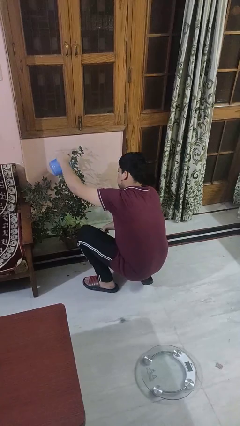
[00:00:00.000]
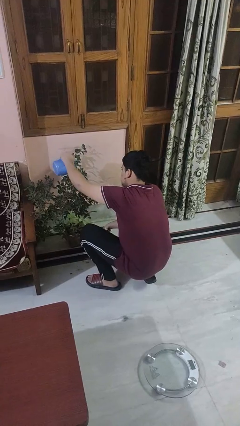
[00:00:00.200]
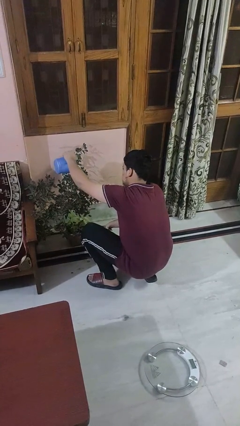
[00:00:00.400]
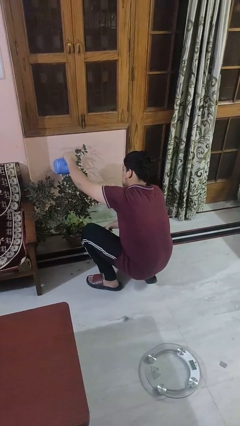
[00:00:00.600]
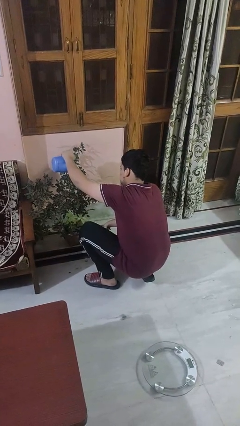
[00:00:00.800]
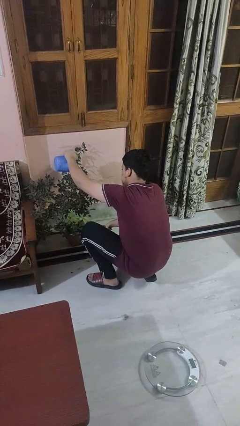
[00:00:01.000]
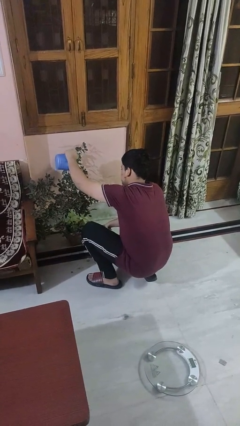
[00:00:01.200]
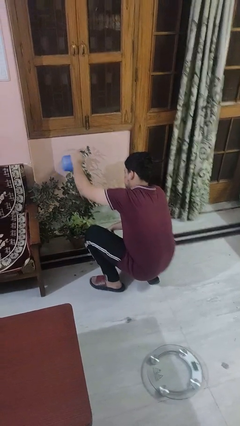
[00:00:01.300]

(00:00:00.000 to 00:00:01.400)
person waters houseplant

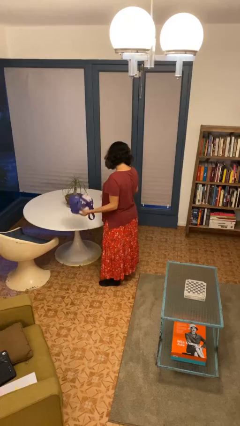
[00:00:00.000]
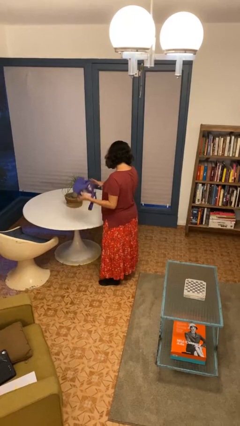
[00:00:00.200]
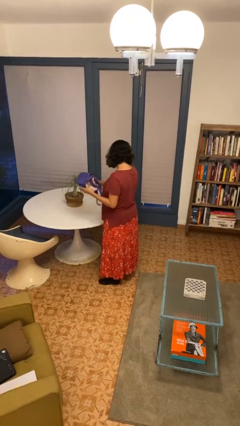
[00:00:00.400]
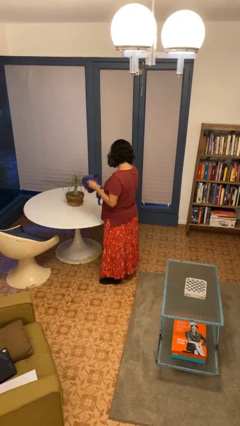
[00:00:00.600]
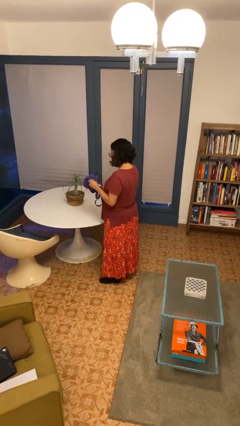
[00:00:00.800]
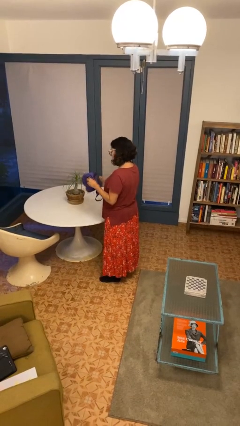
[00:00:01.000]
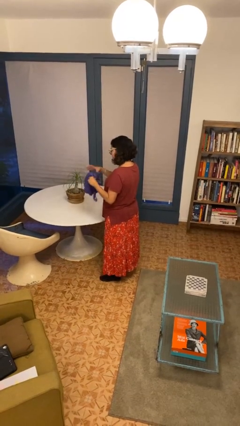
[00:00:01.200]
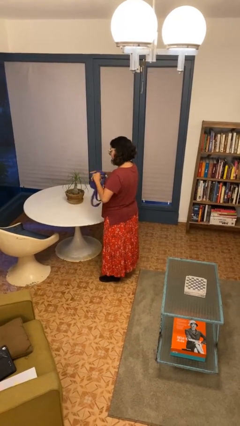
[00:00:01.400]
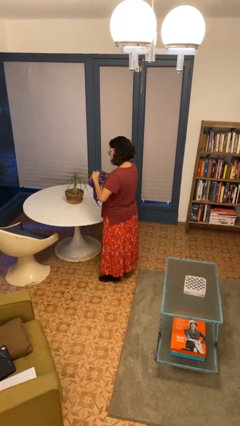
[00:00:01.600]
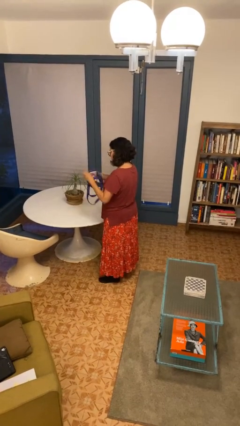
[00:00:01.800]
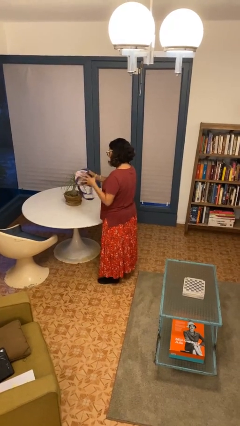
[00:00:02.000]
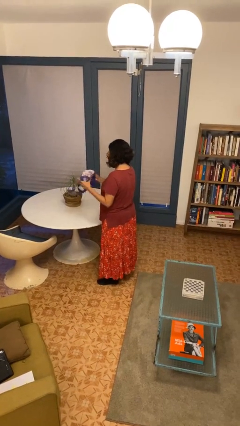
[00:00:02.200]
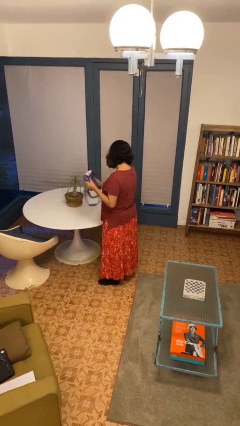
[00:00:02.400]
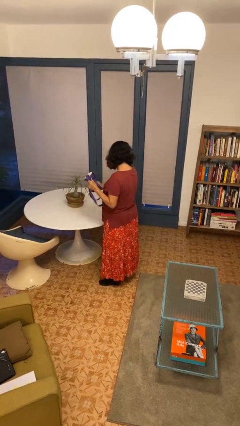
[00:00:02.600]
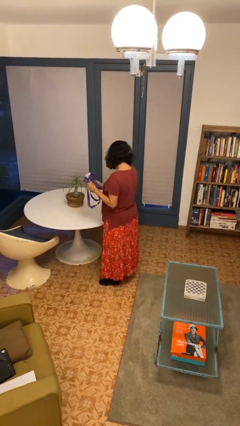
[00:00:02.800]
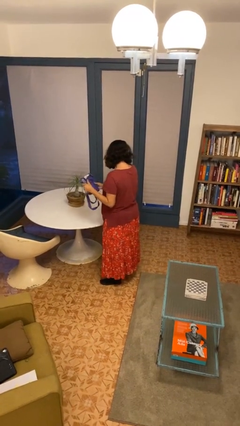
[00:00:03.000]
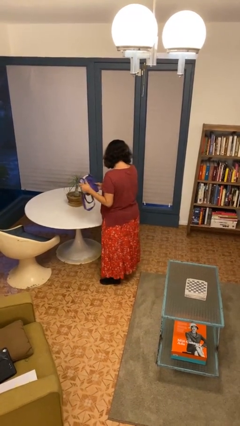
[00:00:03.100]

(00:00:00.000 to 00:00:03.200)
person squeezes object

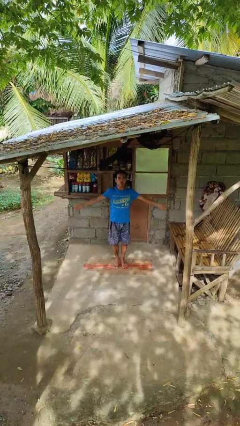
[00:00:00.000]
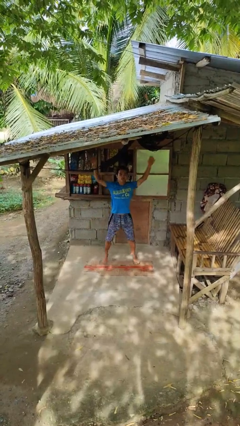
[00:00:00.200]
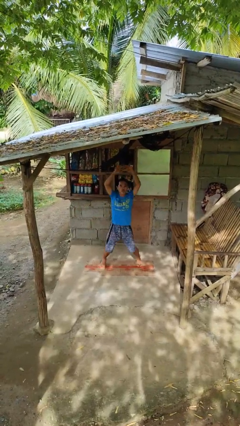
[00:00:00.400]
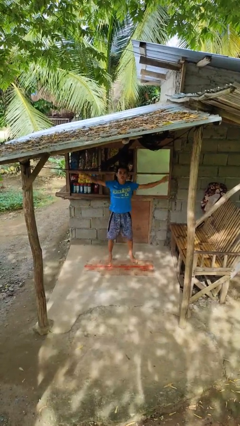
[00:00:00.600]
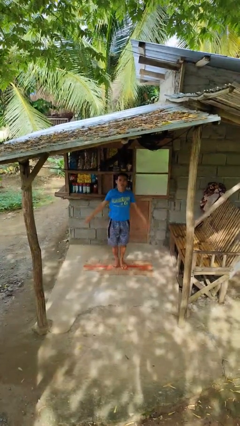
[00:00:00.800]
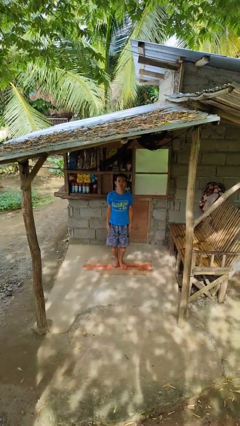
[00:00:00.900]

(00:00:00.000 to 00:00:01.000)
person exercises with jumping jacks

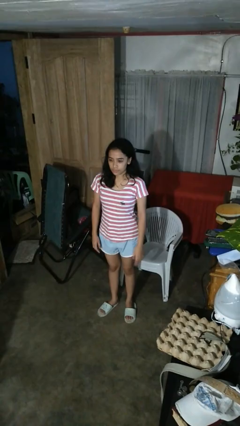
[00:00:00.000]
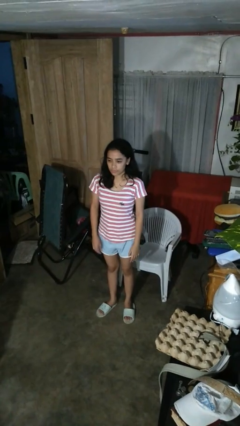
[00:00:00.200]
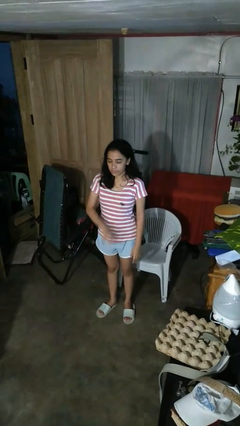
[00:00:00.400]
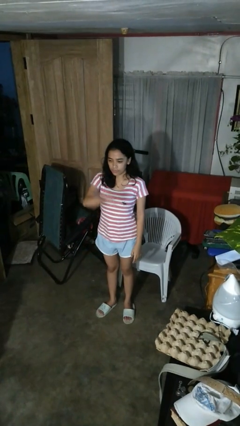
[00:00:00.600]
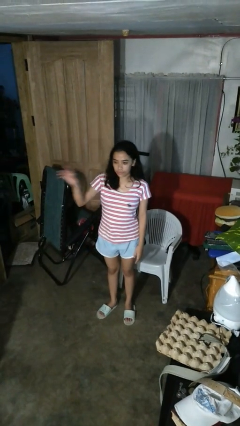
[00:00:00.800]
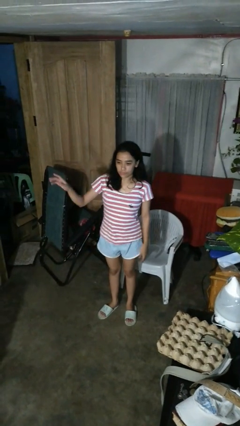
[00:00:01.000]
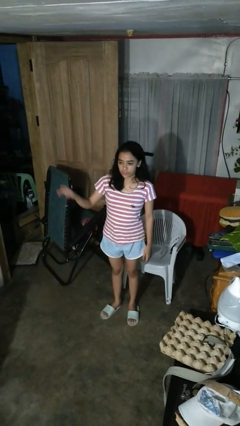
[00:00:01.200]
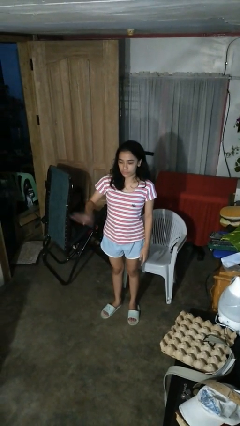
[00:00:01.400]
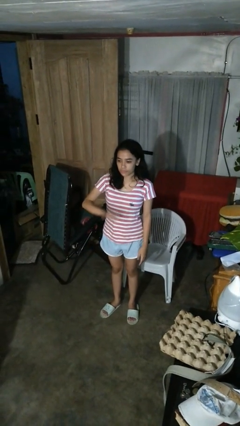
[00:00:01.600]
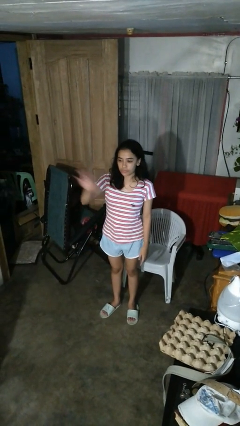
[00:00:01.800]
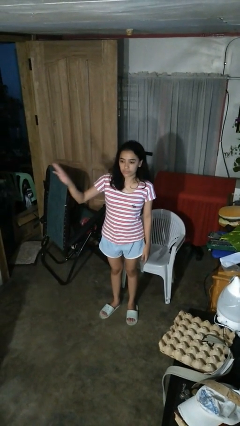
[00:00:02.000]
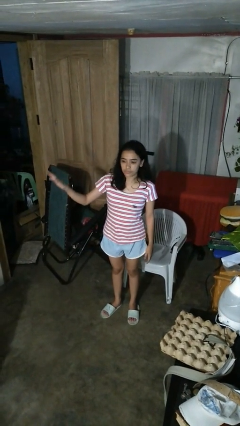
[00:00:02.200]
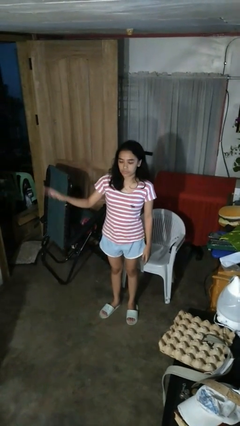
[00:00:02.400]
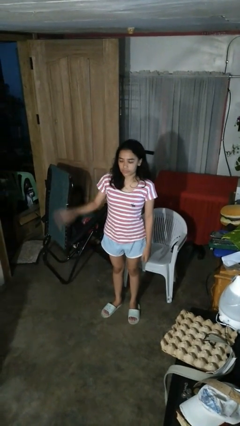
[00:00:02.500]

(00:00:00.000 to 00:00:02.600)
person gestures swipe right

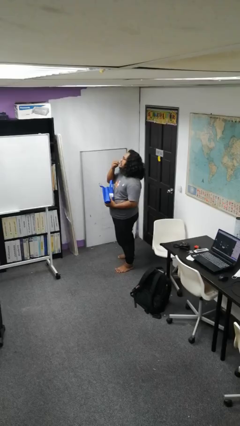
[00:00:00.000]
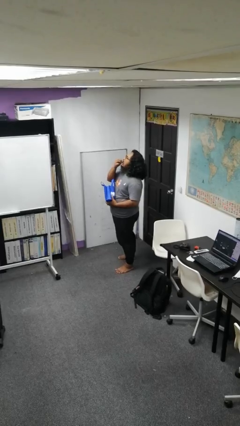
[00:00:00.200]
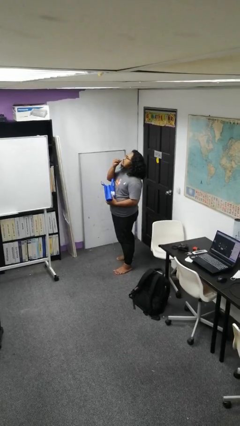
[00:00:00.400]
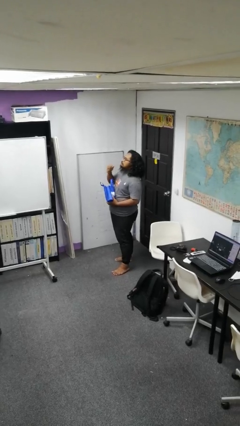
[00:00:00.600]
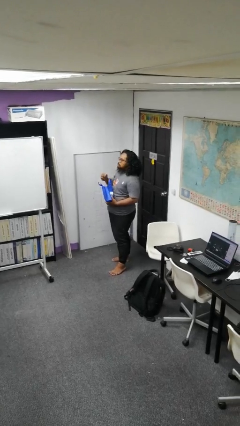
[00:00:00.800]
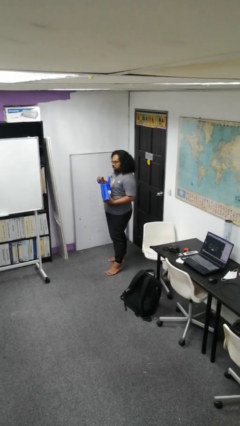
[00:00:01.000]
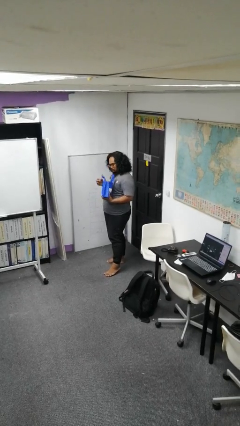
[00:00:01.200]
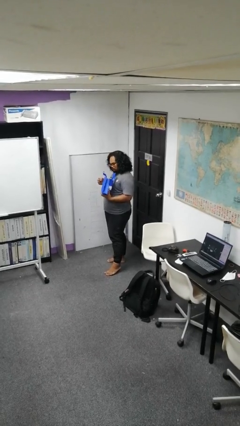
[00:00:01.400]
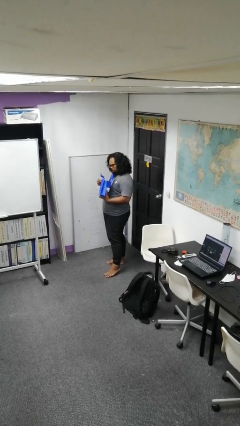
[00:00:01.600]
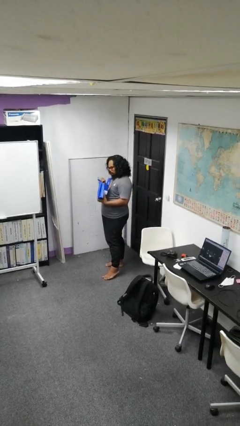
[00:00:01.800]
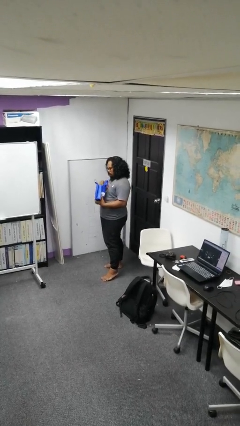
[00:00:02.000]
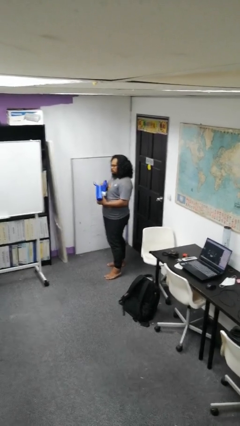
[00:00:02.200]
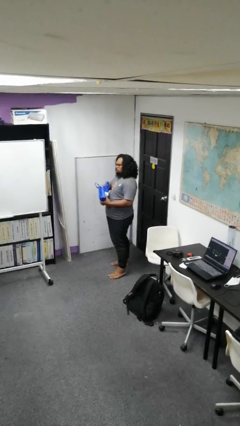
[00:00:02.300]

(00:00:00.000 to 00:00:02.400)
person eats snack from bag

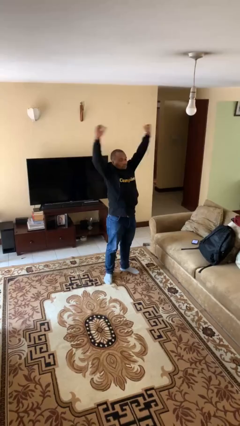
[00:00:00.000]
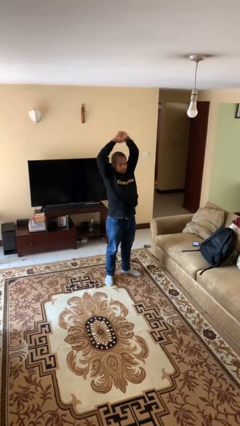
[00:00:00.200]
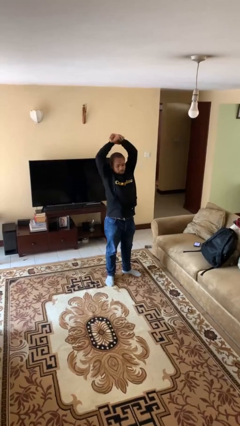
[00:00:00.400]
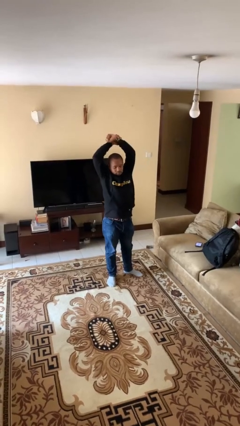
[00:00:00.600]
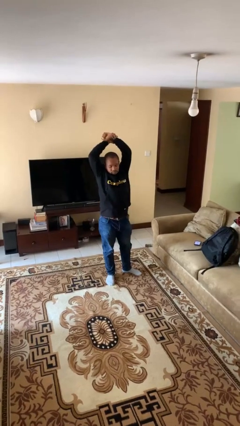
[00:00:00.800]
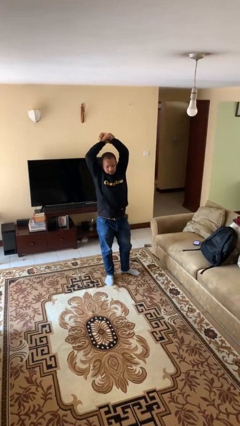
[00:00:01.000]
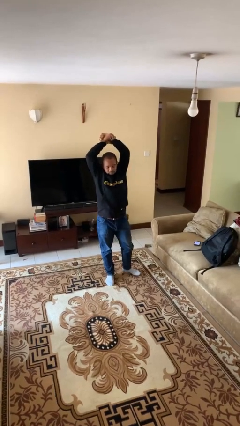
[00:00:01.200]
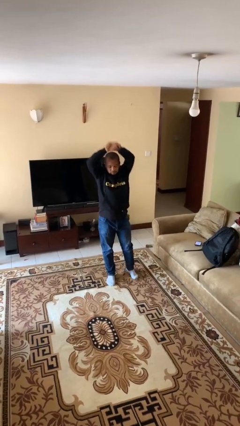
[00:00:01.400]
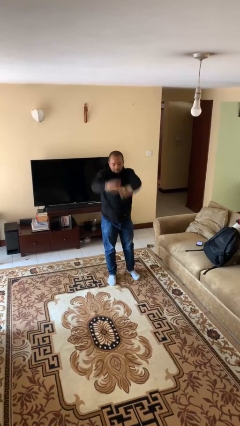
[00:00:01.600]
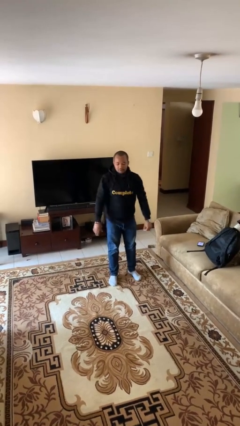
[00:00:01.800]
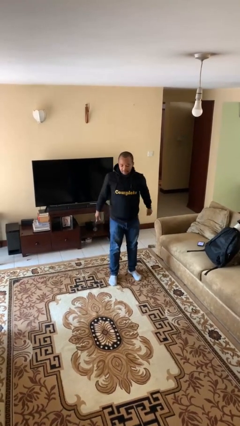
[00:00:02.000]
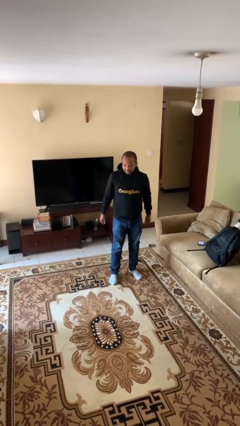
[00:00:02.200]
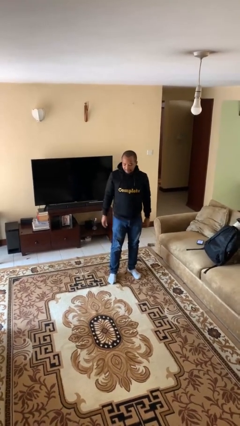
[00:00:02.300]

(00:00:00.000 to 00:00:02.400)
person stretches arms over head

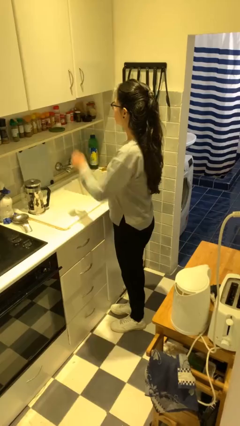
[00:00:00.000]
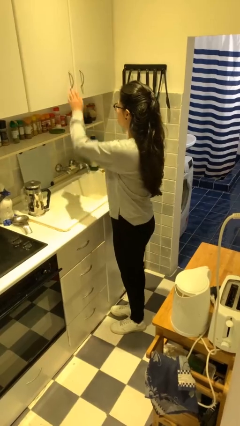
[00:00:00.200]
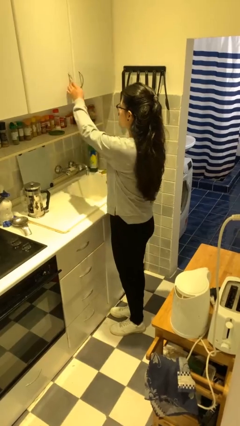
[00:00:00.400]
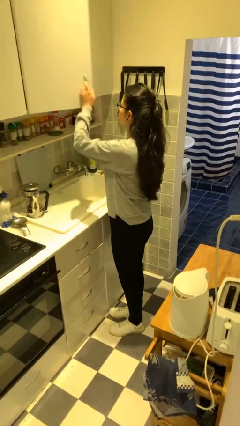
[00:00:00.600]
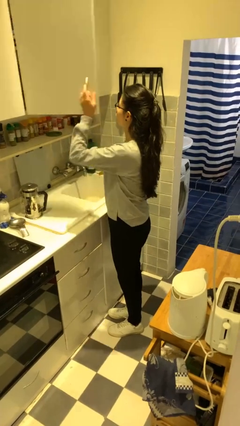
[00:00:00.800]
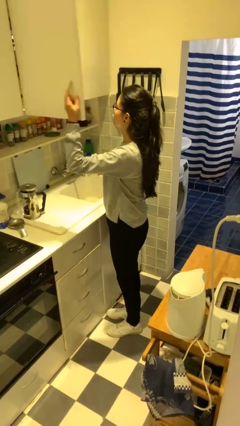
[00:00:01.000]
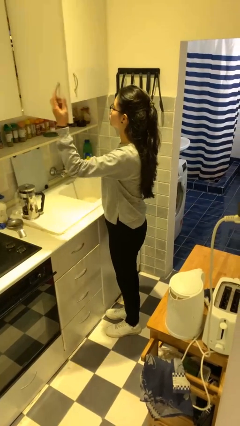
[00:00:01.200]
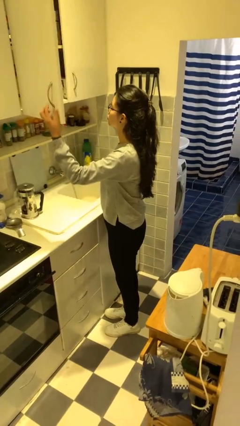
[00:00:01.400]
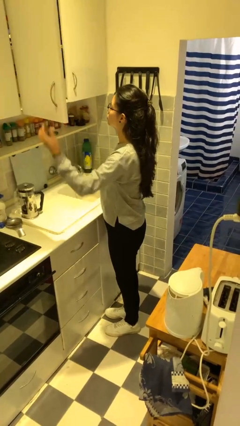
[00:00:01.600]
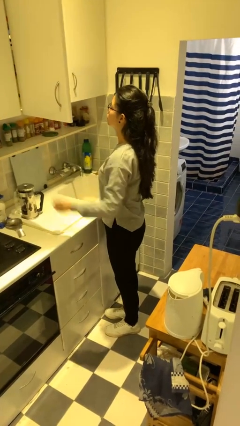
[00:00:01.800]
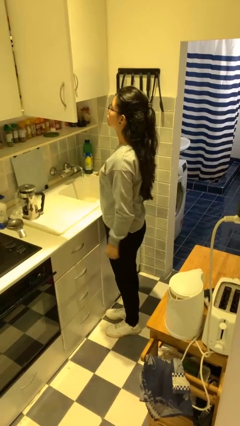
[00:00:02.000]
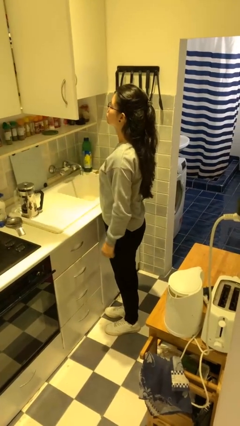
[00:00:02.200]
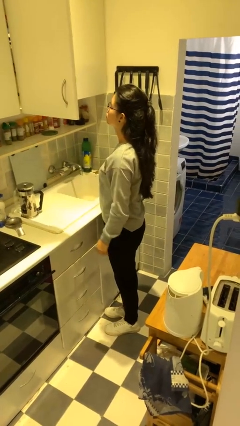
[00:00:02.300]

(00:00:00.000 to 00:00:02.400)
person opens cabinet

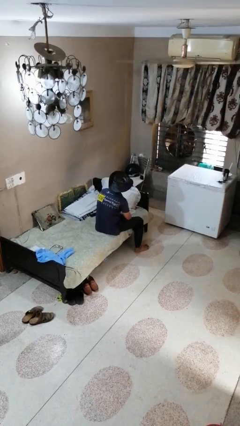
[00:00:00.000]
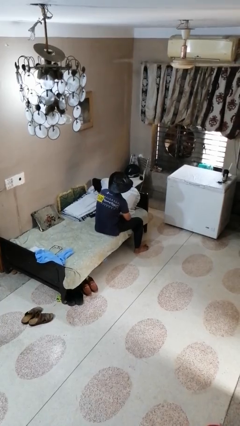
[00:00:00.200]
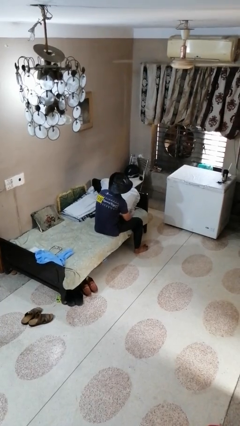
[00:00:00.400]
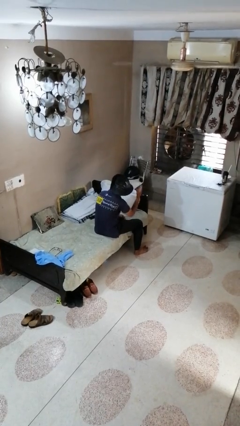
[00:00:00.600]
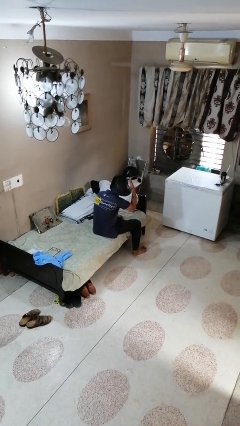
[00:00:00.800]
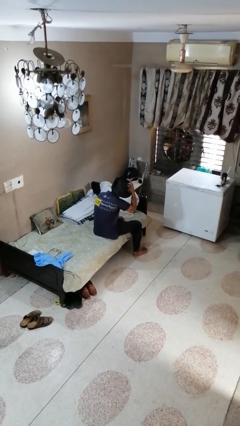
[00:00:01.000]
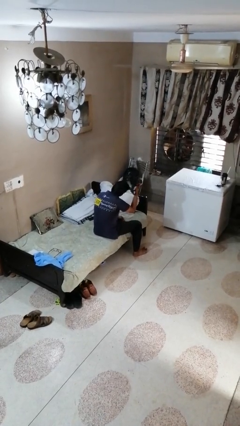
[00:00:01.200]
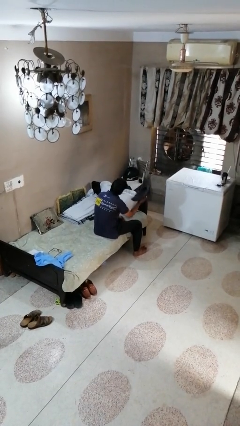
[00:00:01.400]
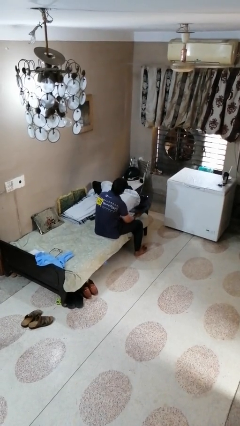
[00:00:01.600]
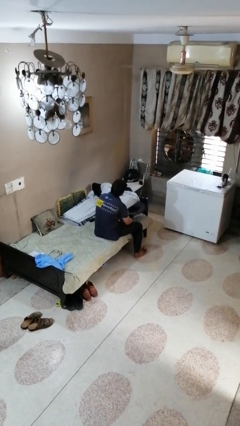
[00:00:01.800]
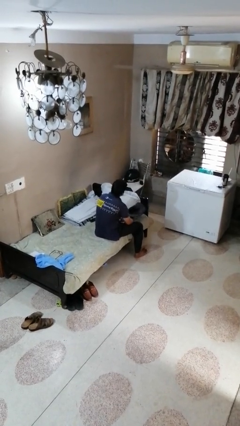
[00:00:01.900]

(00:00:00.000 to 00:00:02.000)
person takes off hat
